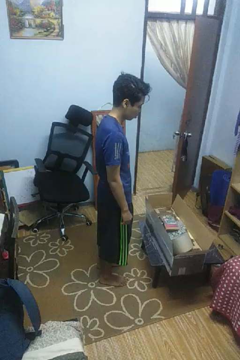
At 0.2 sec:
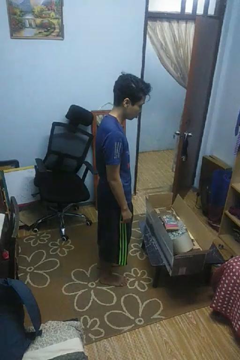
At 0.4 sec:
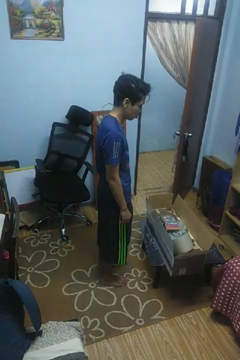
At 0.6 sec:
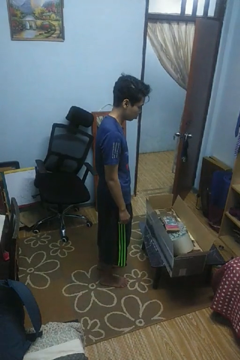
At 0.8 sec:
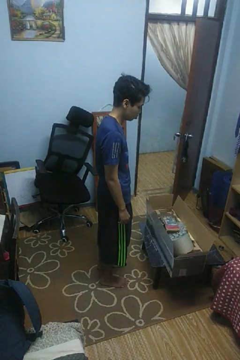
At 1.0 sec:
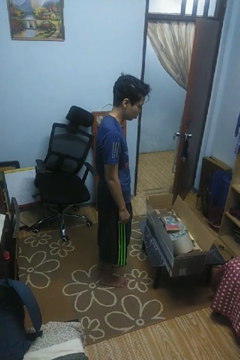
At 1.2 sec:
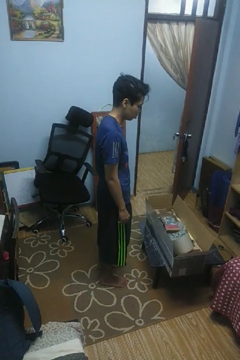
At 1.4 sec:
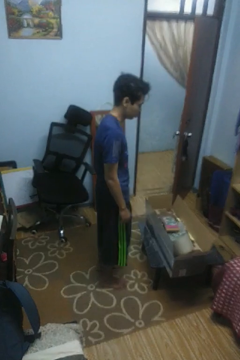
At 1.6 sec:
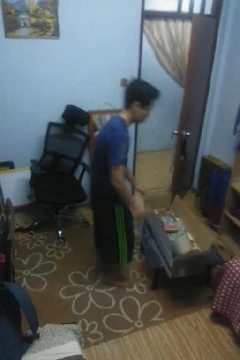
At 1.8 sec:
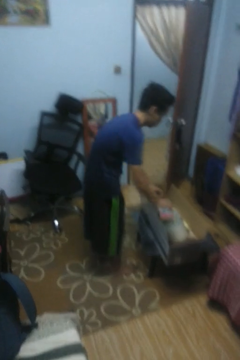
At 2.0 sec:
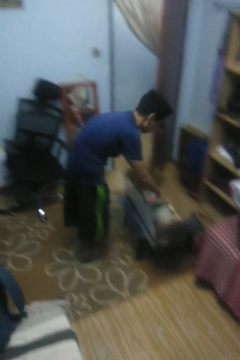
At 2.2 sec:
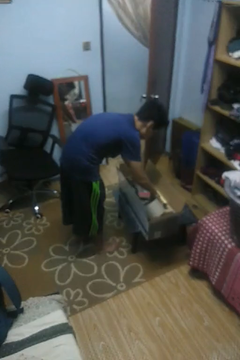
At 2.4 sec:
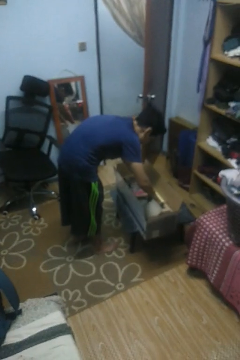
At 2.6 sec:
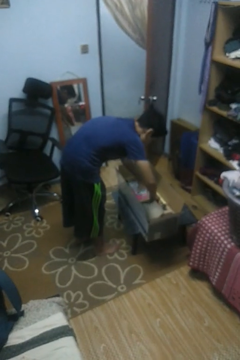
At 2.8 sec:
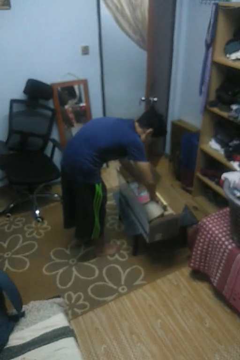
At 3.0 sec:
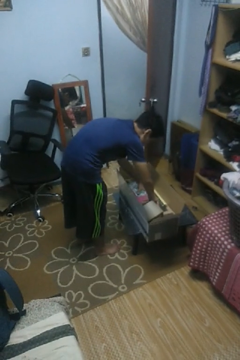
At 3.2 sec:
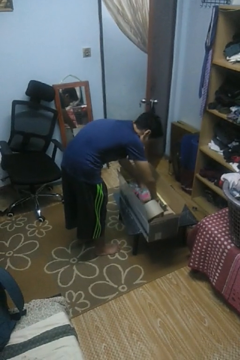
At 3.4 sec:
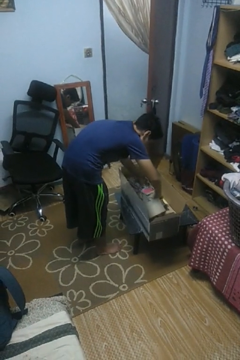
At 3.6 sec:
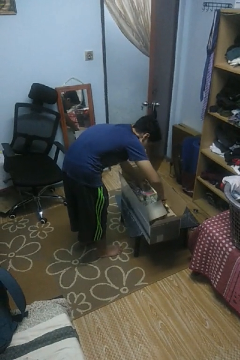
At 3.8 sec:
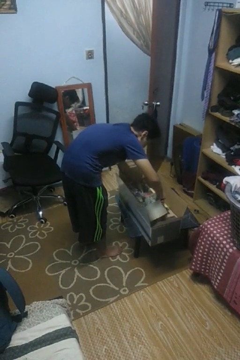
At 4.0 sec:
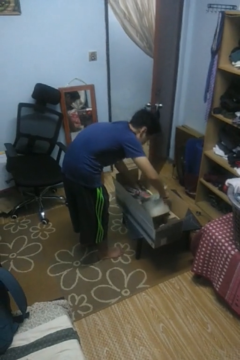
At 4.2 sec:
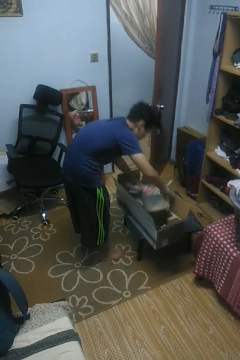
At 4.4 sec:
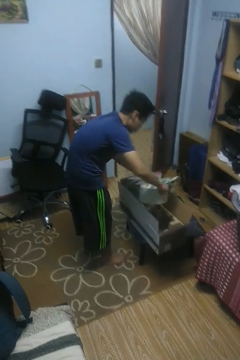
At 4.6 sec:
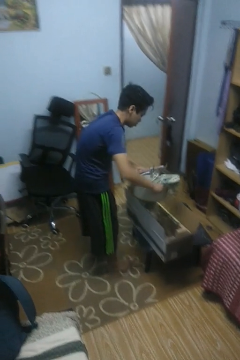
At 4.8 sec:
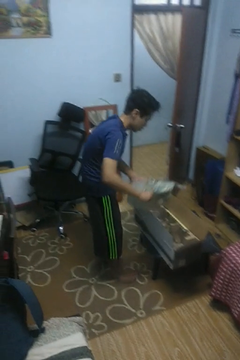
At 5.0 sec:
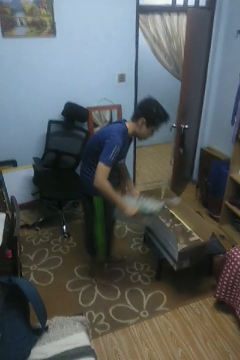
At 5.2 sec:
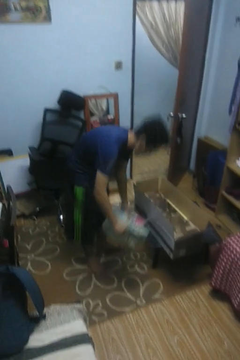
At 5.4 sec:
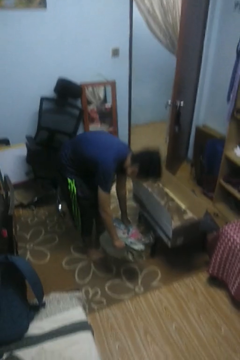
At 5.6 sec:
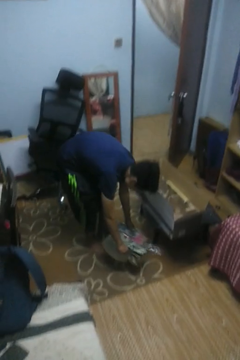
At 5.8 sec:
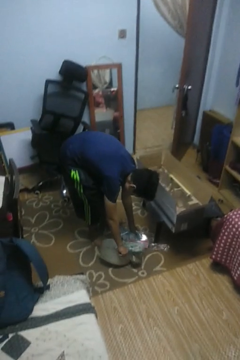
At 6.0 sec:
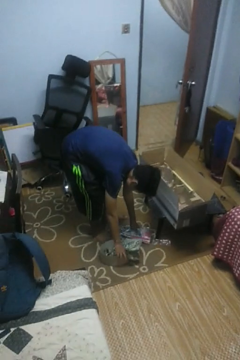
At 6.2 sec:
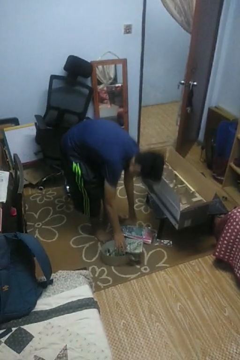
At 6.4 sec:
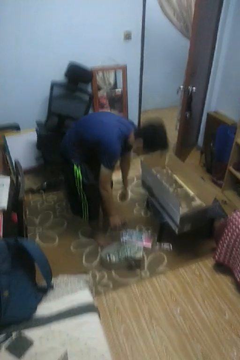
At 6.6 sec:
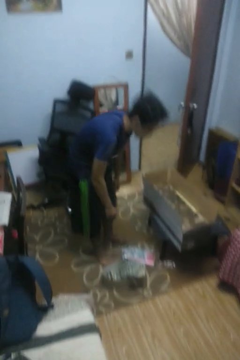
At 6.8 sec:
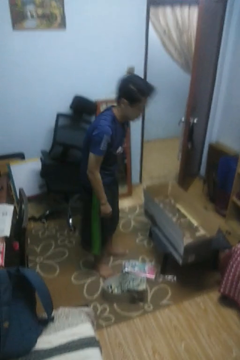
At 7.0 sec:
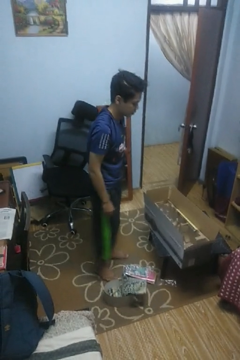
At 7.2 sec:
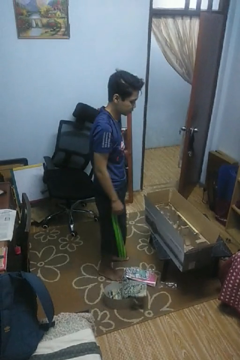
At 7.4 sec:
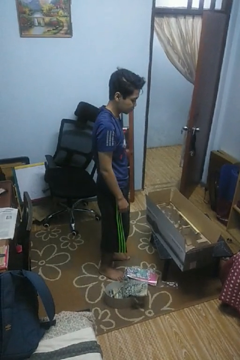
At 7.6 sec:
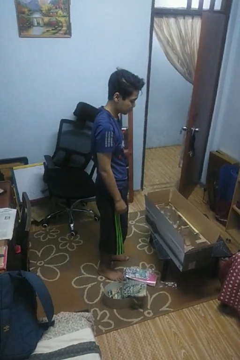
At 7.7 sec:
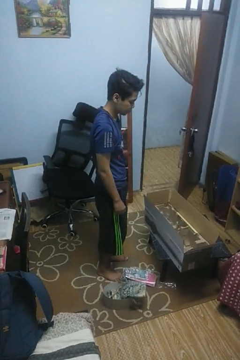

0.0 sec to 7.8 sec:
person unloads box onto floor

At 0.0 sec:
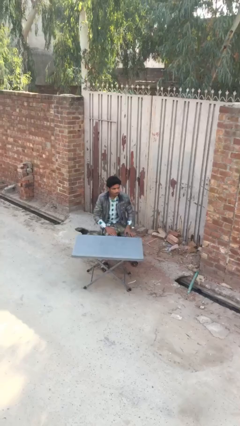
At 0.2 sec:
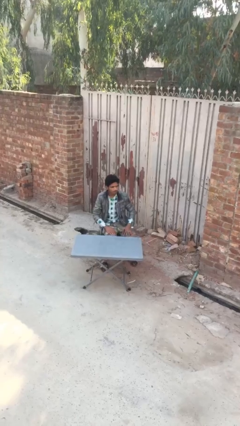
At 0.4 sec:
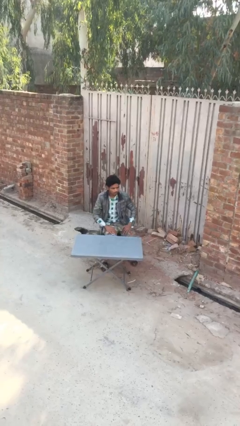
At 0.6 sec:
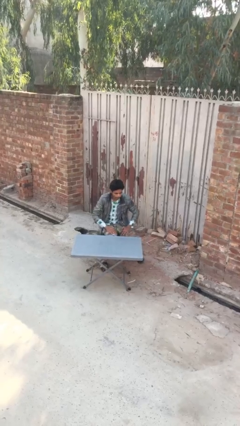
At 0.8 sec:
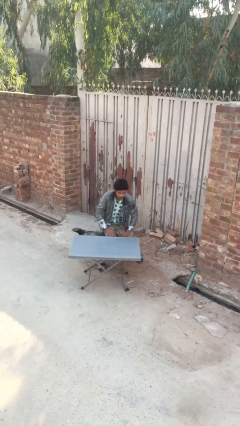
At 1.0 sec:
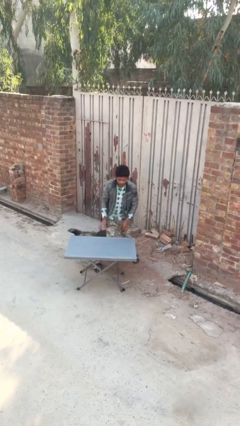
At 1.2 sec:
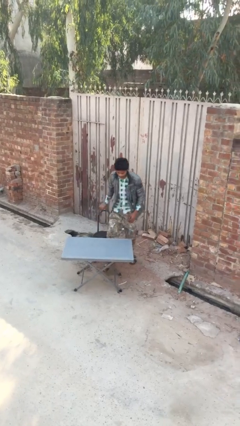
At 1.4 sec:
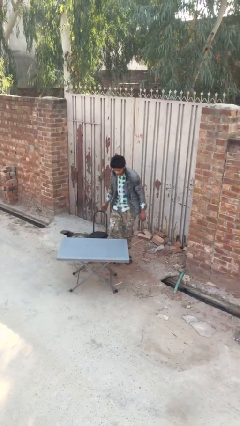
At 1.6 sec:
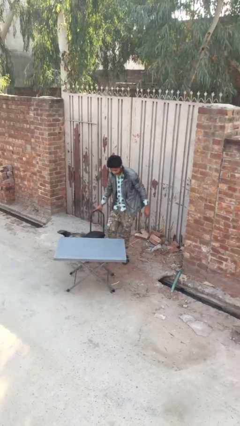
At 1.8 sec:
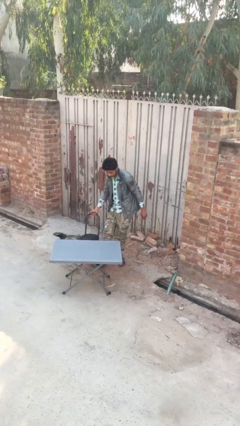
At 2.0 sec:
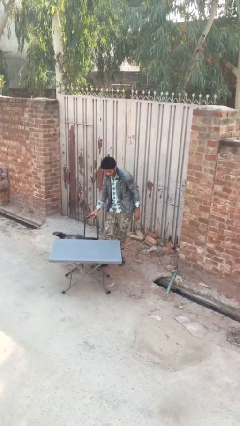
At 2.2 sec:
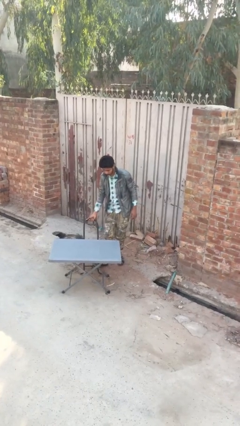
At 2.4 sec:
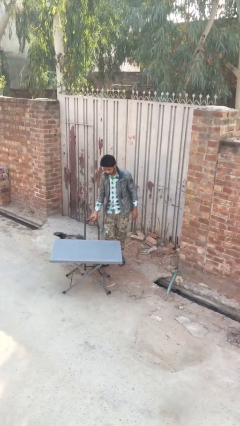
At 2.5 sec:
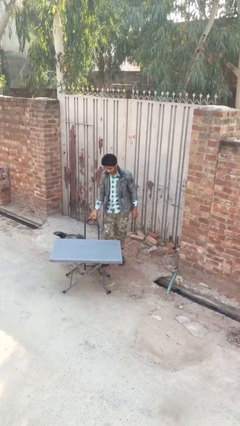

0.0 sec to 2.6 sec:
person stands up

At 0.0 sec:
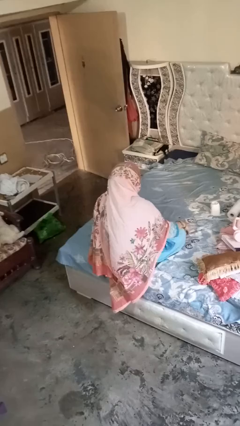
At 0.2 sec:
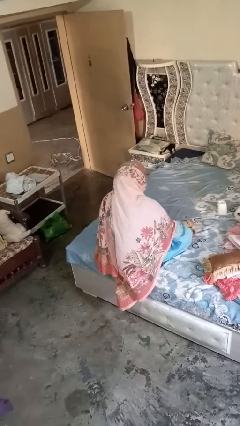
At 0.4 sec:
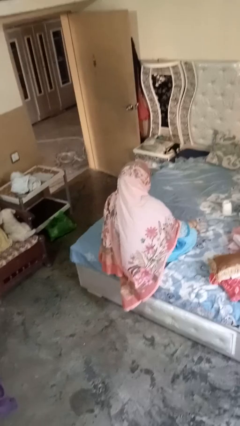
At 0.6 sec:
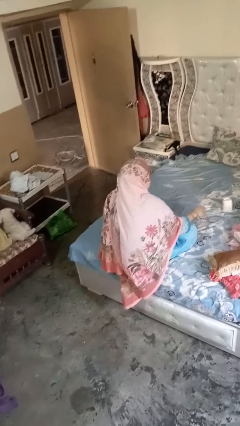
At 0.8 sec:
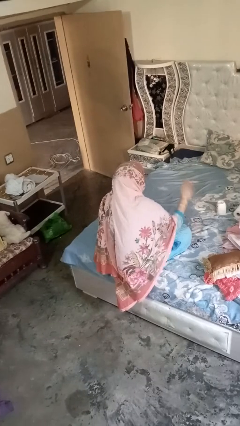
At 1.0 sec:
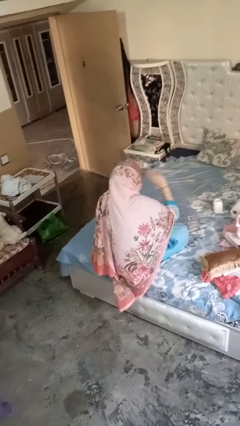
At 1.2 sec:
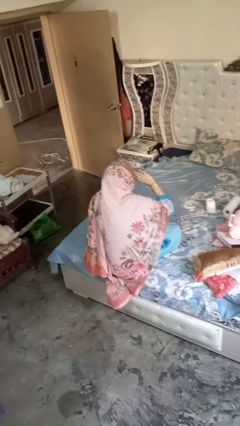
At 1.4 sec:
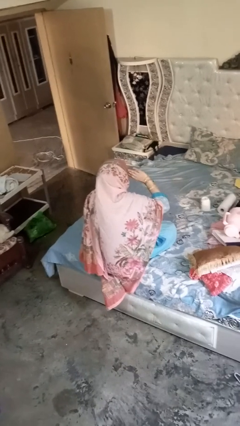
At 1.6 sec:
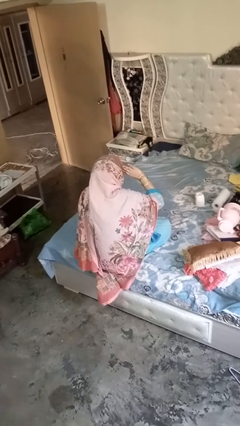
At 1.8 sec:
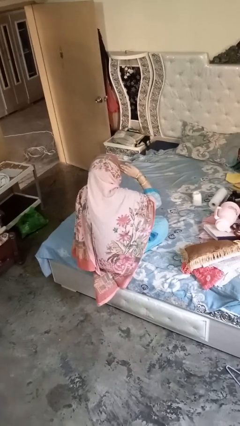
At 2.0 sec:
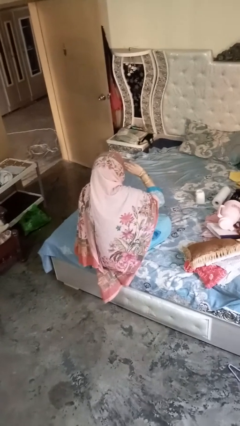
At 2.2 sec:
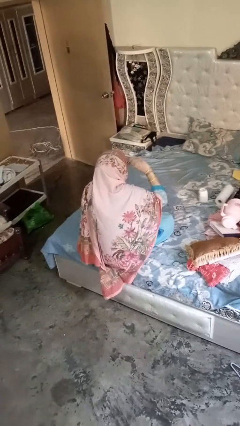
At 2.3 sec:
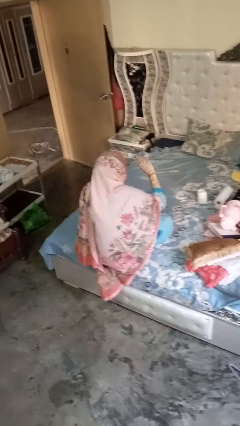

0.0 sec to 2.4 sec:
person salutes

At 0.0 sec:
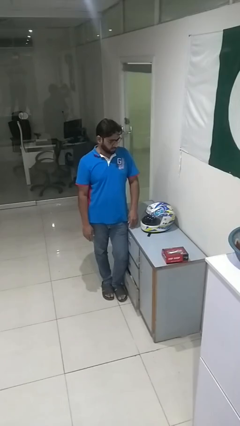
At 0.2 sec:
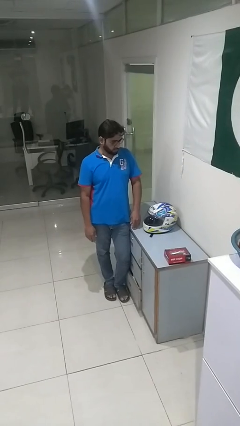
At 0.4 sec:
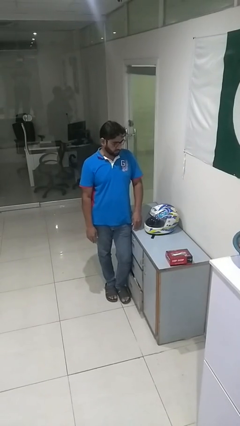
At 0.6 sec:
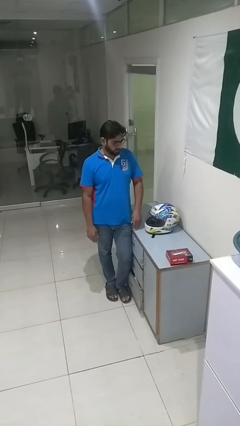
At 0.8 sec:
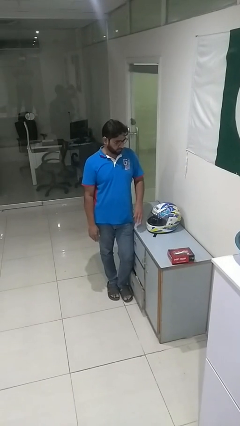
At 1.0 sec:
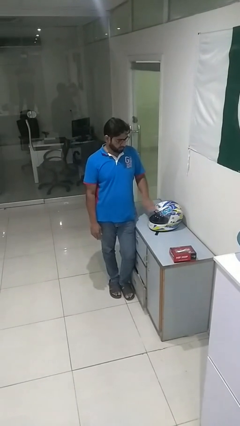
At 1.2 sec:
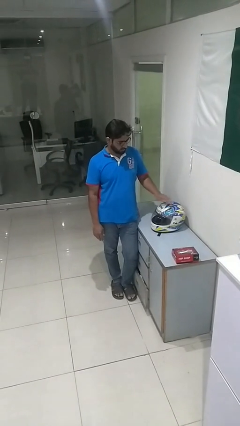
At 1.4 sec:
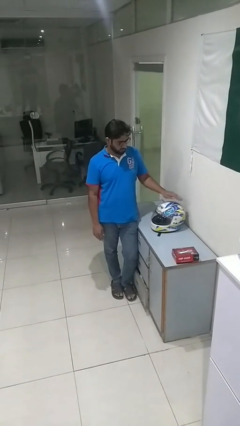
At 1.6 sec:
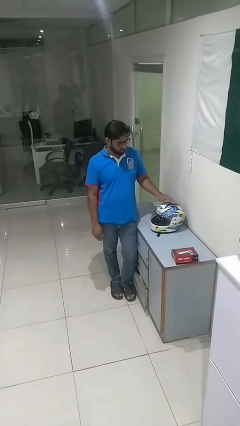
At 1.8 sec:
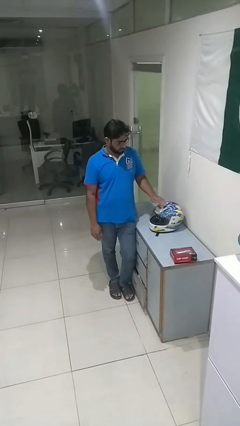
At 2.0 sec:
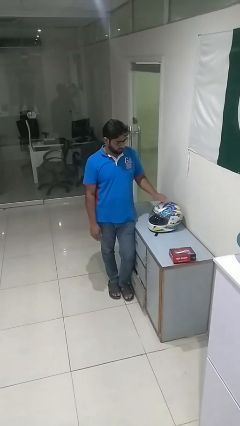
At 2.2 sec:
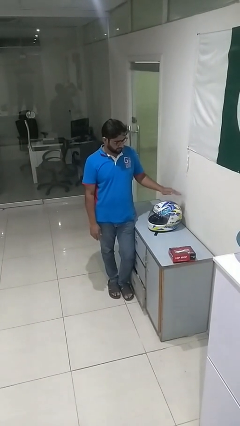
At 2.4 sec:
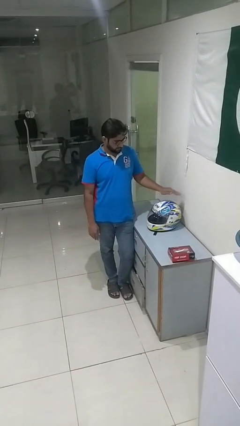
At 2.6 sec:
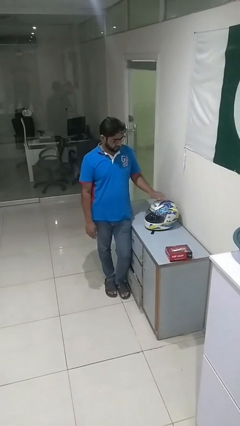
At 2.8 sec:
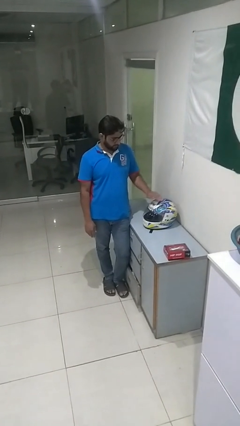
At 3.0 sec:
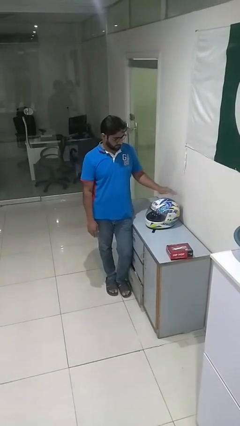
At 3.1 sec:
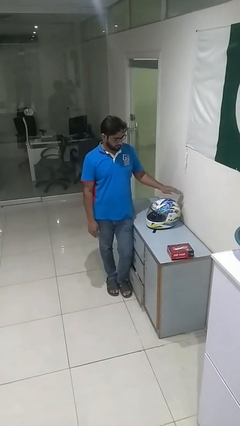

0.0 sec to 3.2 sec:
person waves hand over object

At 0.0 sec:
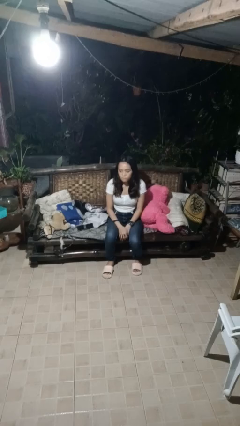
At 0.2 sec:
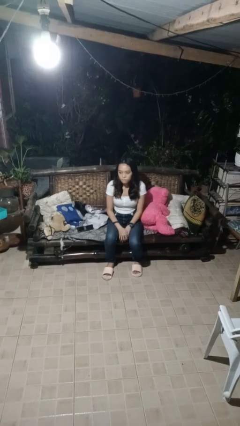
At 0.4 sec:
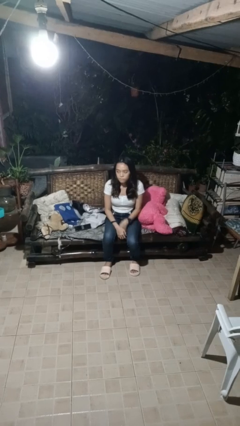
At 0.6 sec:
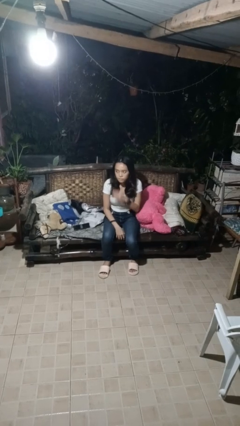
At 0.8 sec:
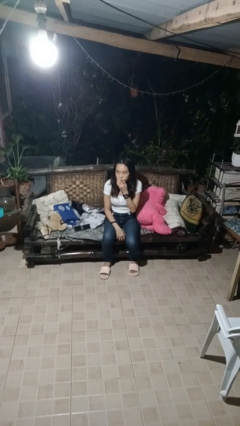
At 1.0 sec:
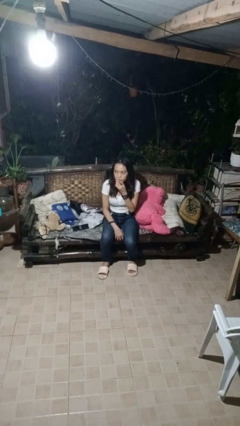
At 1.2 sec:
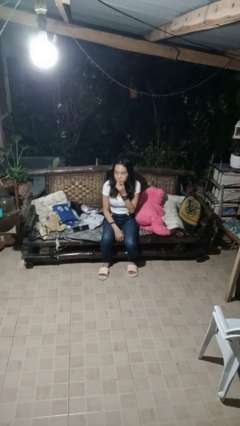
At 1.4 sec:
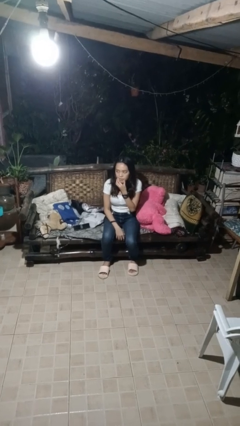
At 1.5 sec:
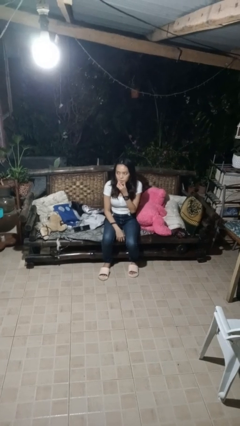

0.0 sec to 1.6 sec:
person strokes chin

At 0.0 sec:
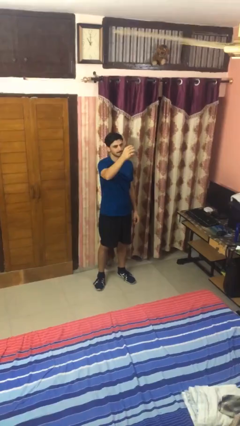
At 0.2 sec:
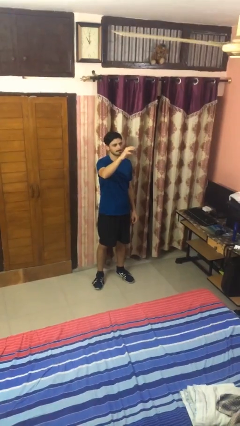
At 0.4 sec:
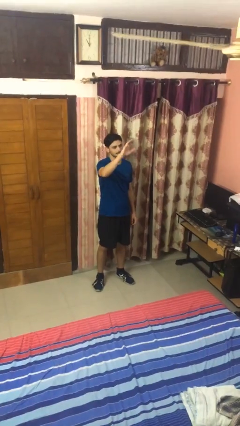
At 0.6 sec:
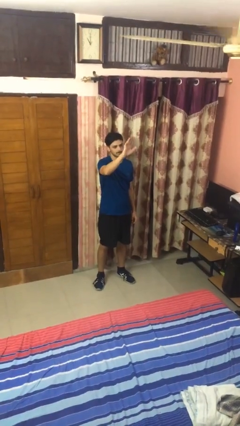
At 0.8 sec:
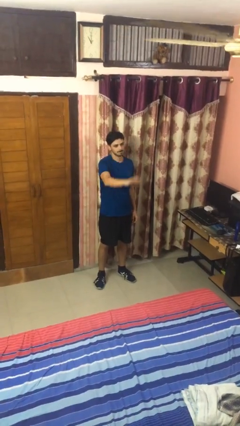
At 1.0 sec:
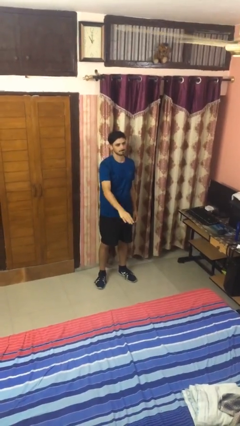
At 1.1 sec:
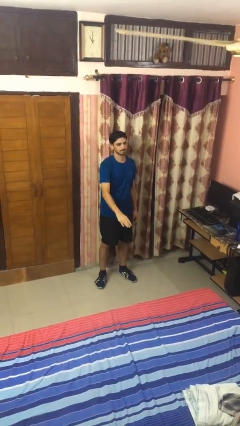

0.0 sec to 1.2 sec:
person gestures swipe down
